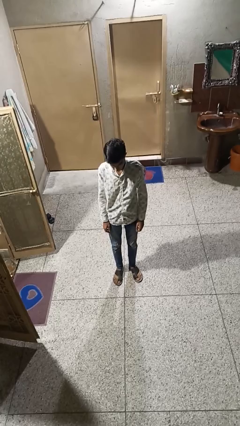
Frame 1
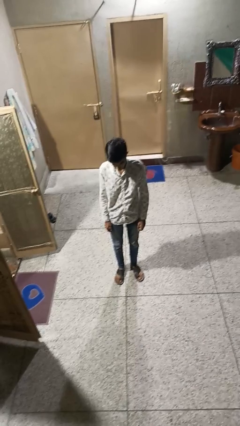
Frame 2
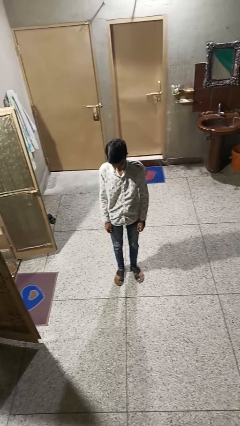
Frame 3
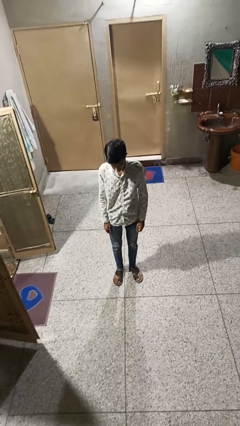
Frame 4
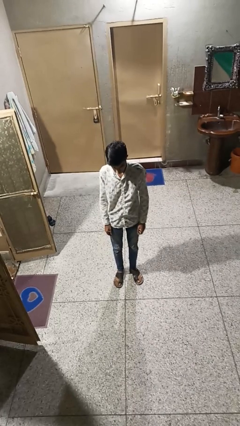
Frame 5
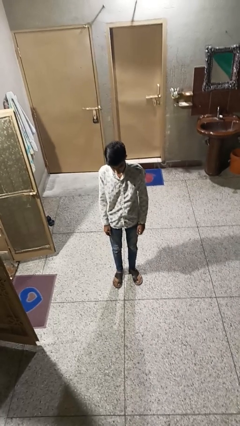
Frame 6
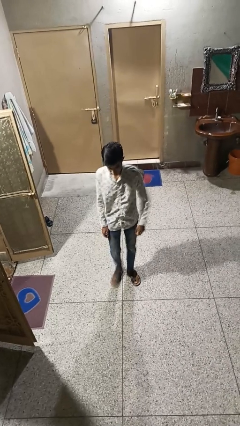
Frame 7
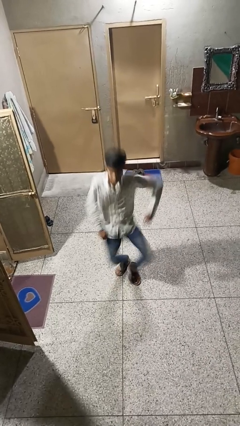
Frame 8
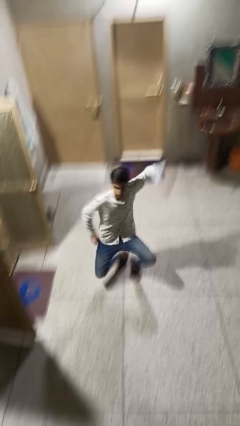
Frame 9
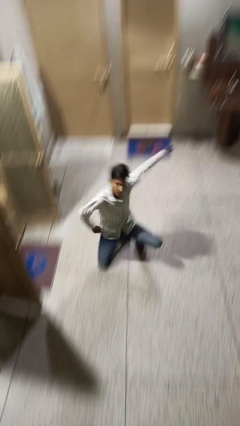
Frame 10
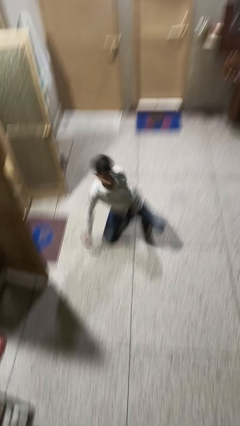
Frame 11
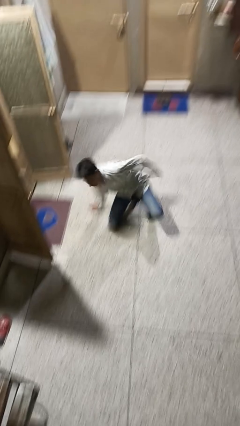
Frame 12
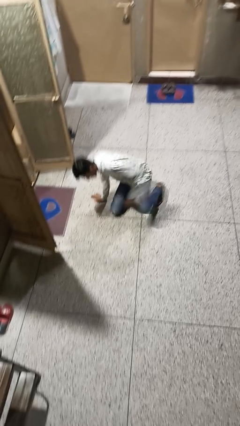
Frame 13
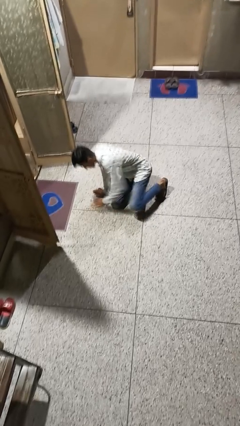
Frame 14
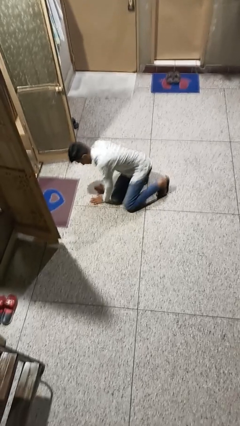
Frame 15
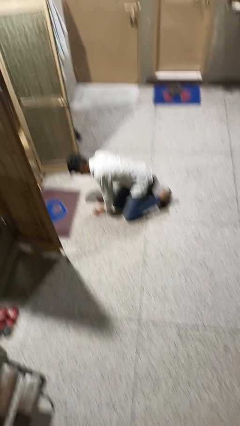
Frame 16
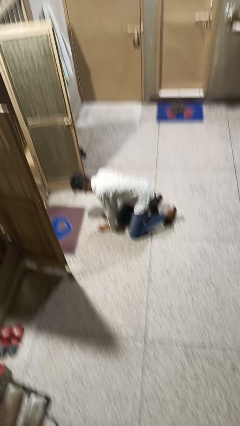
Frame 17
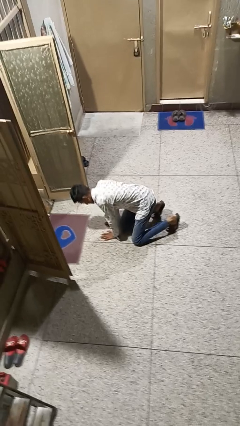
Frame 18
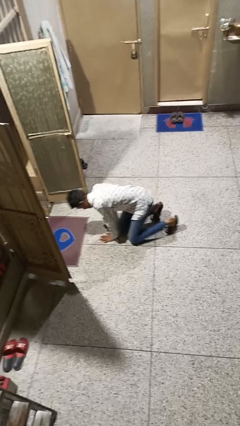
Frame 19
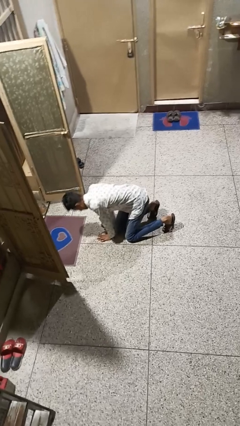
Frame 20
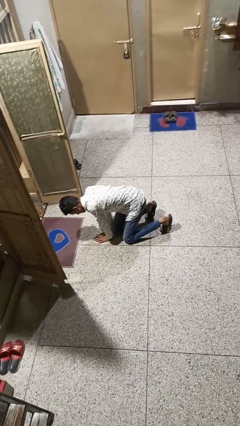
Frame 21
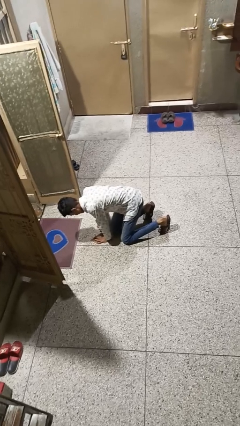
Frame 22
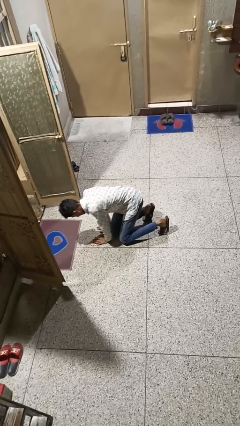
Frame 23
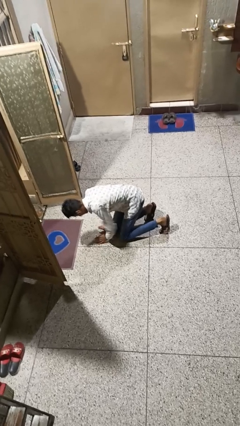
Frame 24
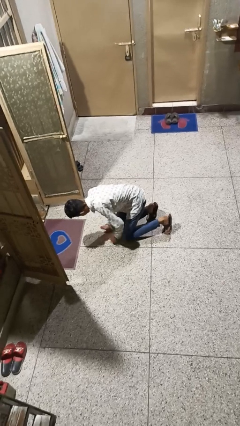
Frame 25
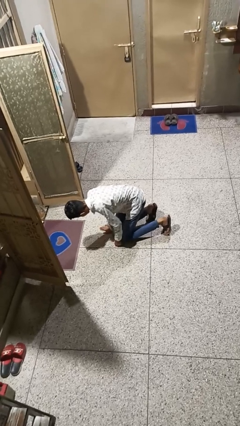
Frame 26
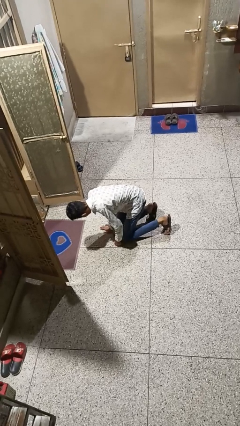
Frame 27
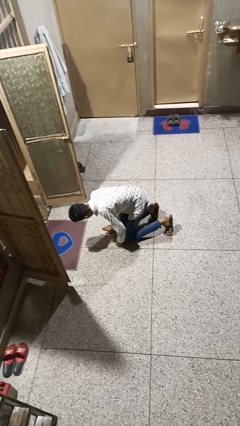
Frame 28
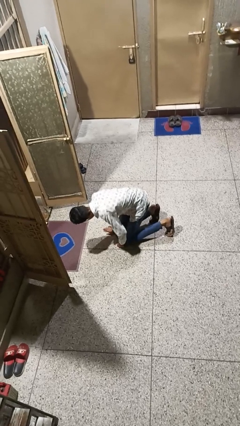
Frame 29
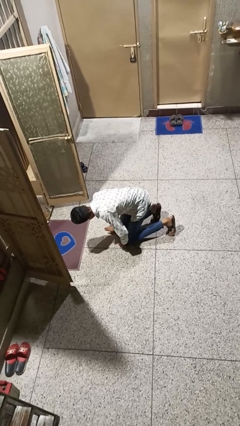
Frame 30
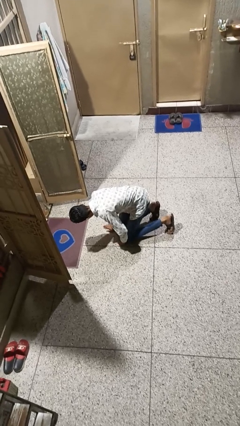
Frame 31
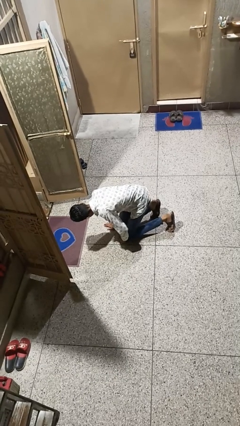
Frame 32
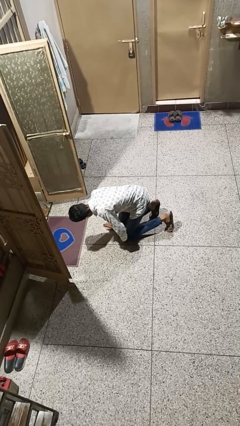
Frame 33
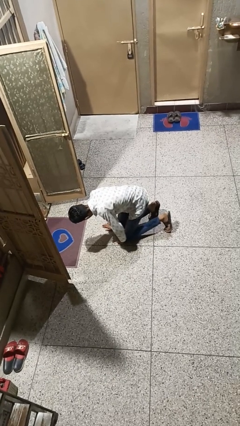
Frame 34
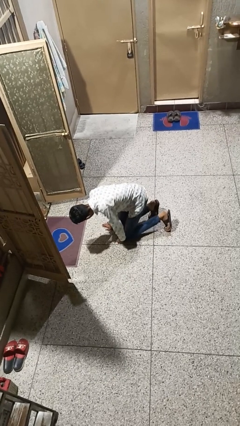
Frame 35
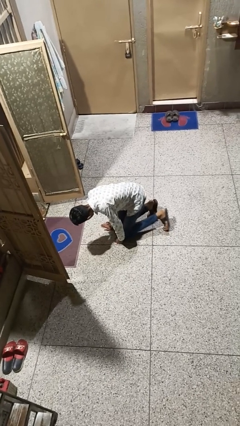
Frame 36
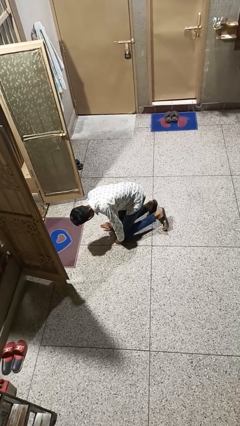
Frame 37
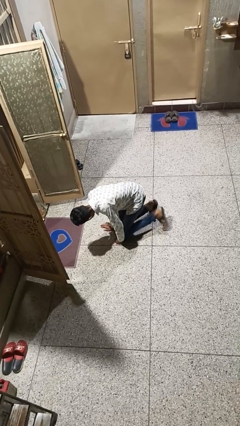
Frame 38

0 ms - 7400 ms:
person falls while standing

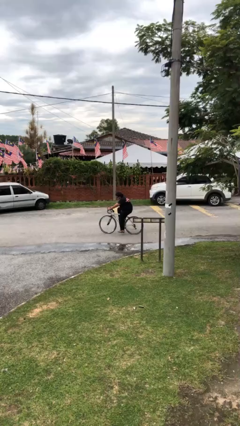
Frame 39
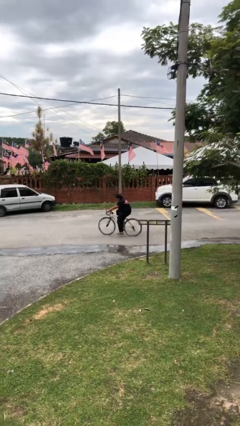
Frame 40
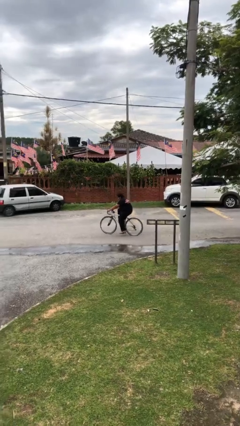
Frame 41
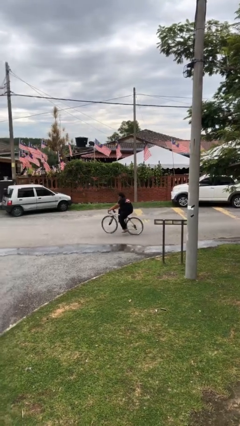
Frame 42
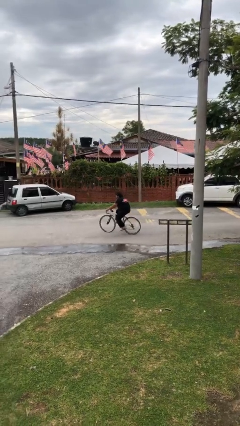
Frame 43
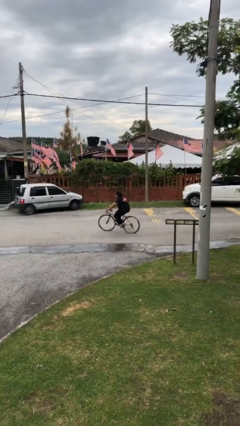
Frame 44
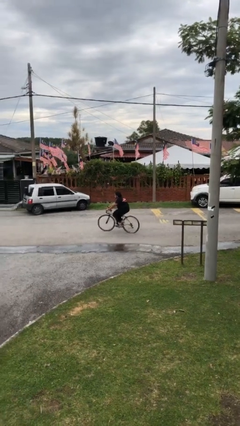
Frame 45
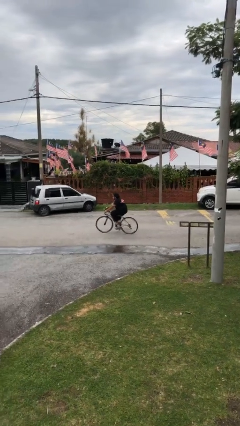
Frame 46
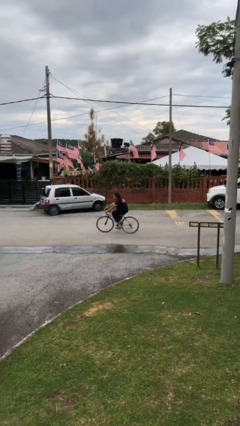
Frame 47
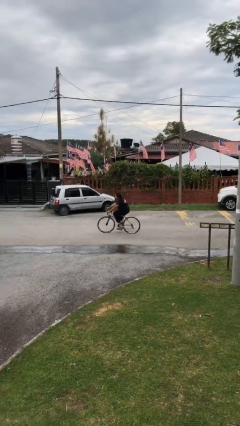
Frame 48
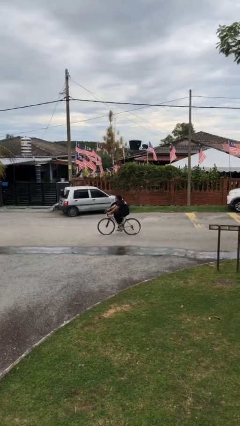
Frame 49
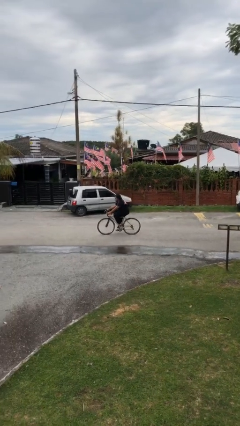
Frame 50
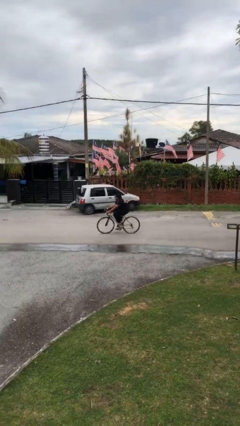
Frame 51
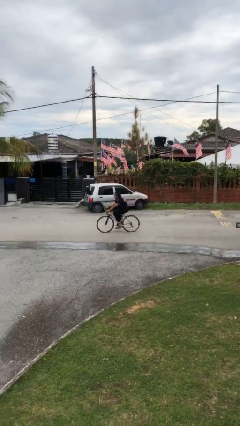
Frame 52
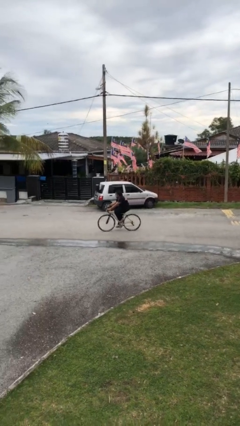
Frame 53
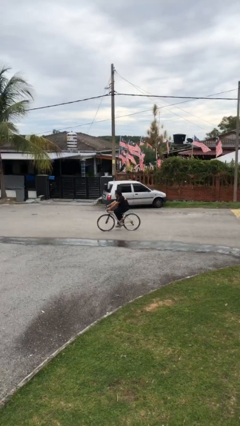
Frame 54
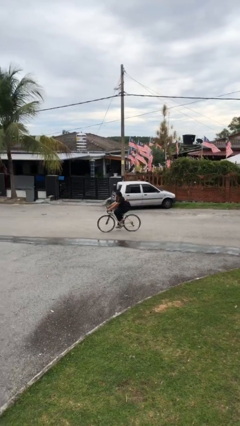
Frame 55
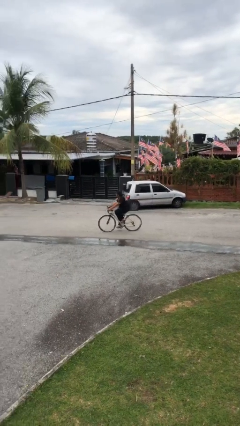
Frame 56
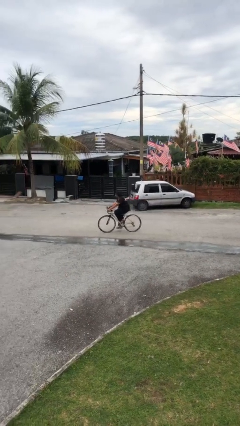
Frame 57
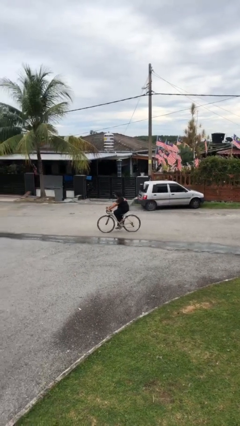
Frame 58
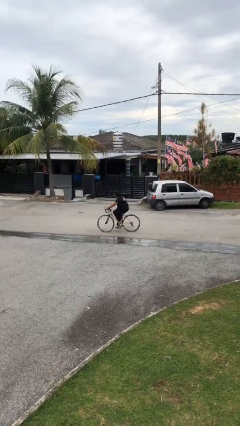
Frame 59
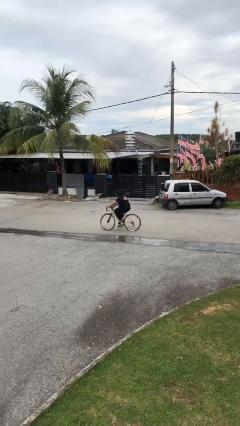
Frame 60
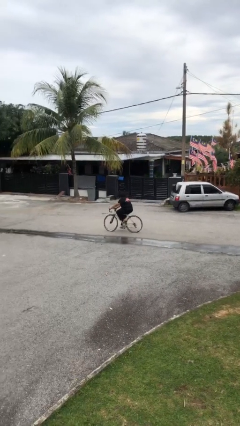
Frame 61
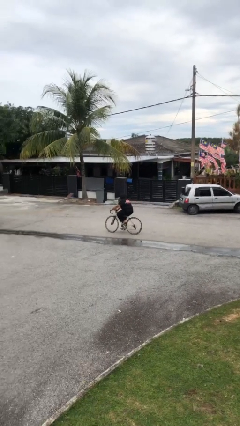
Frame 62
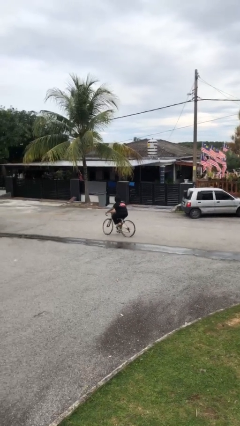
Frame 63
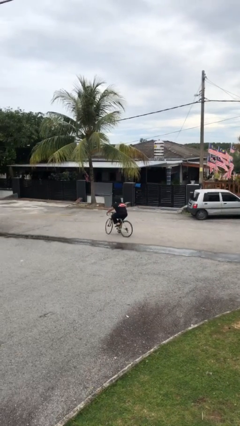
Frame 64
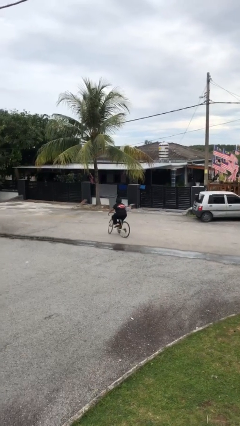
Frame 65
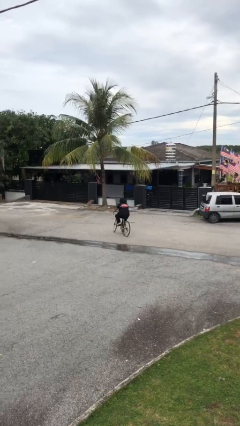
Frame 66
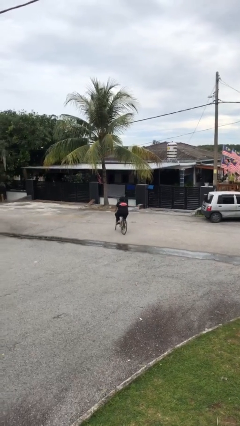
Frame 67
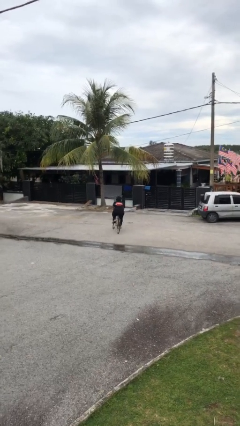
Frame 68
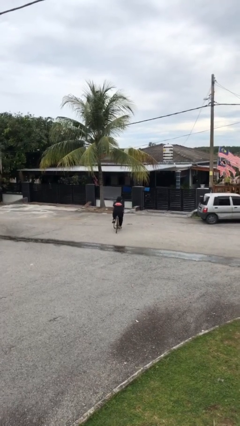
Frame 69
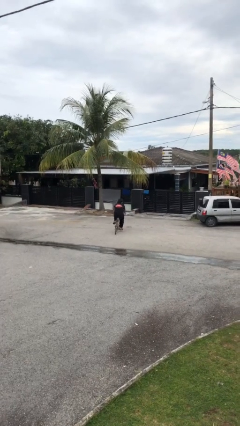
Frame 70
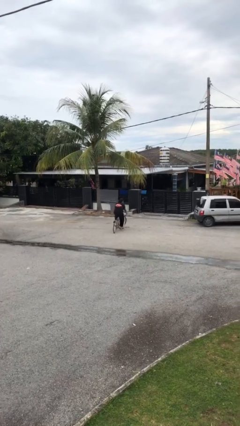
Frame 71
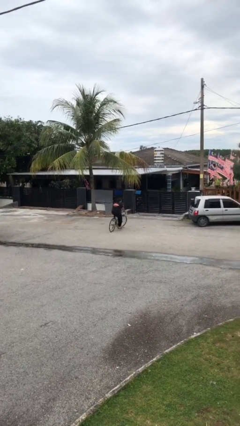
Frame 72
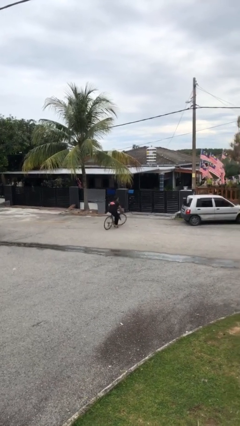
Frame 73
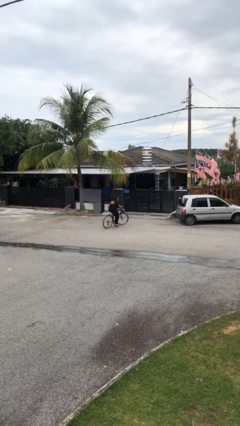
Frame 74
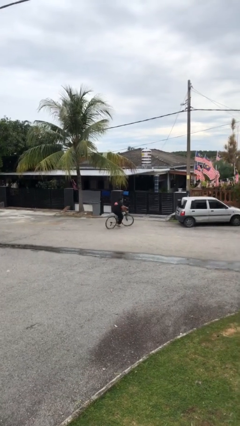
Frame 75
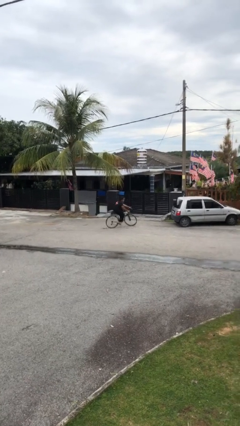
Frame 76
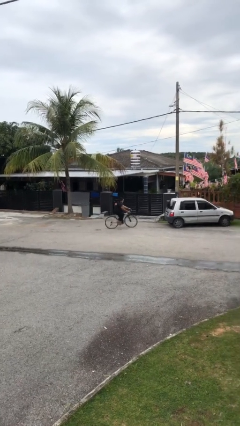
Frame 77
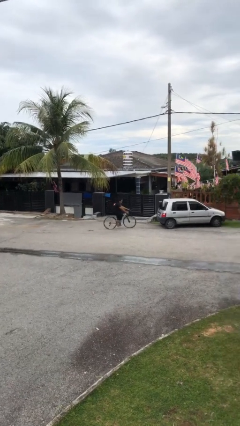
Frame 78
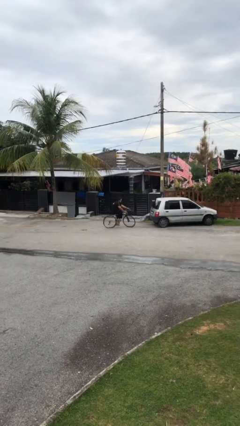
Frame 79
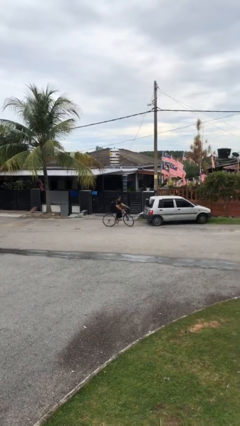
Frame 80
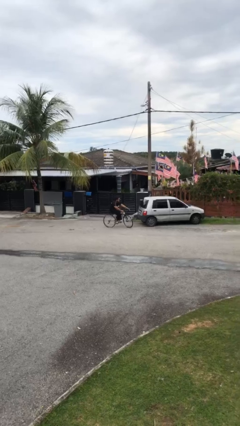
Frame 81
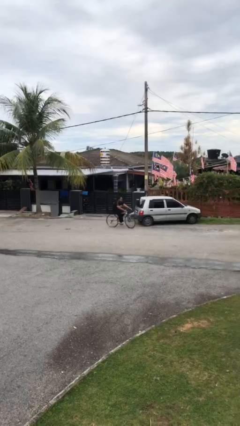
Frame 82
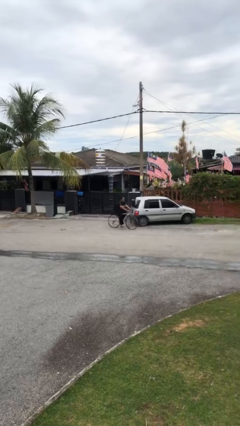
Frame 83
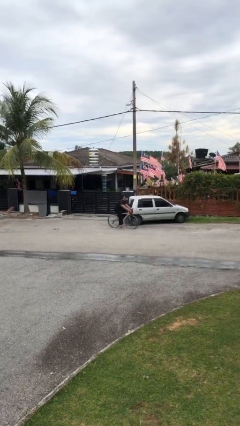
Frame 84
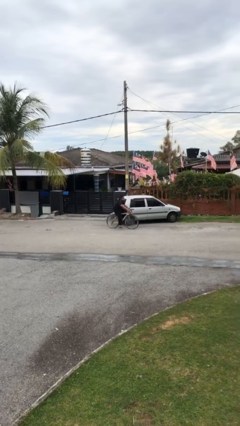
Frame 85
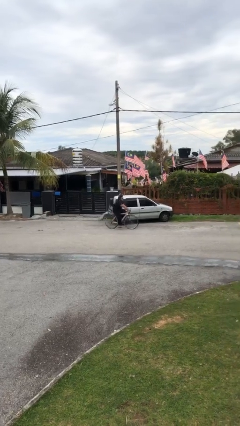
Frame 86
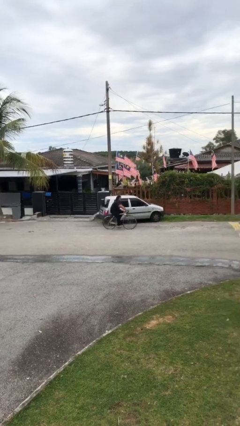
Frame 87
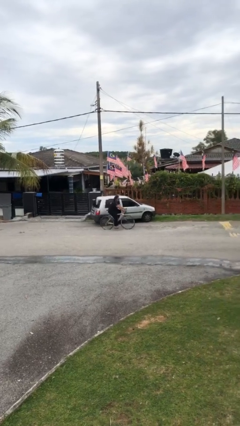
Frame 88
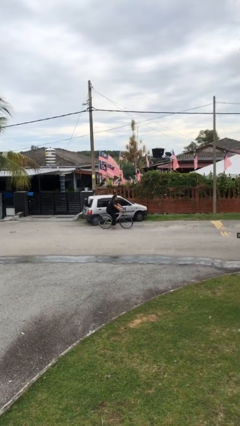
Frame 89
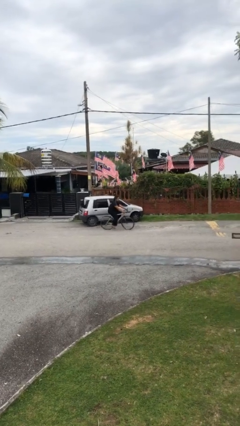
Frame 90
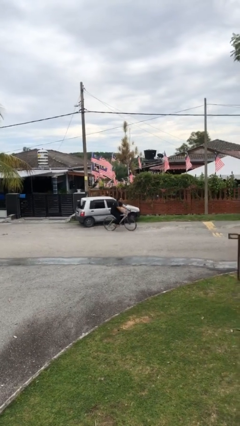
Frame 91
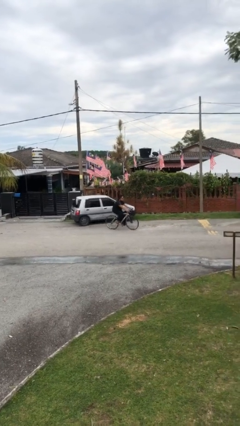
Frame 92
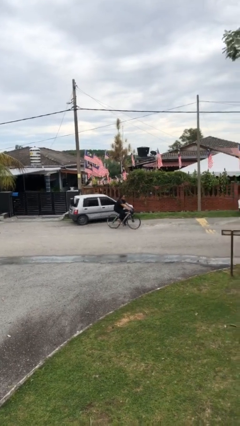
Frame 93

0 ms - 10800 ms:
person rides bicycle

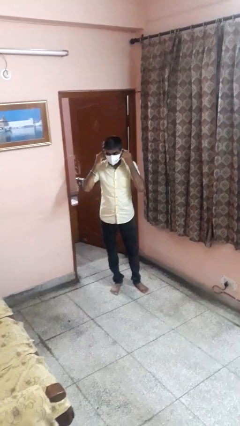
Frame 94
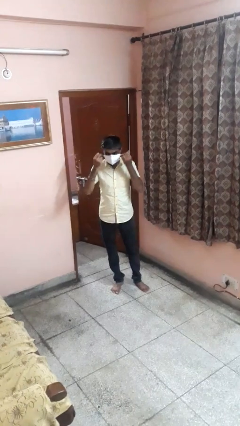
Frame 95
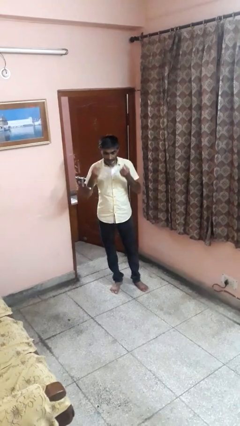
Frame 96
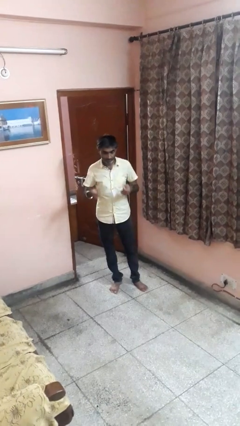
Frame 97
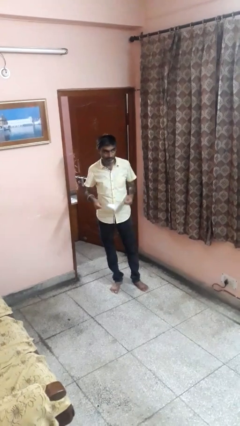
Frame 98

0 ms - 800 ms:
person takes off facemask
